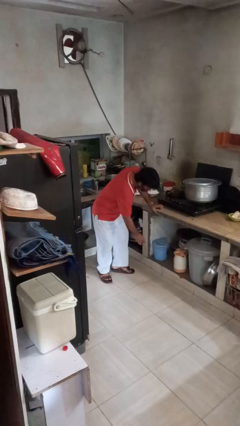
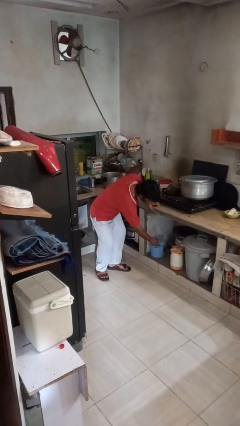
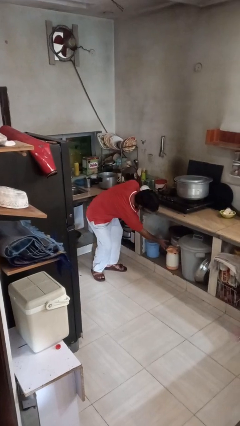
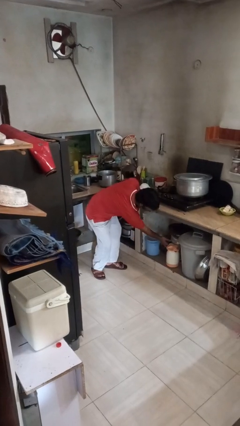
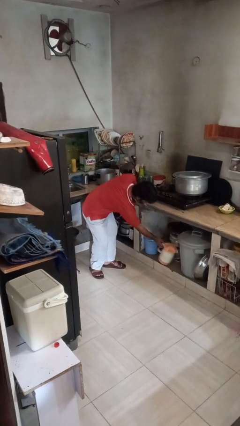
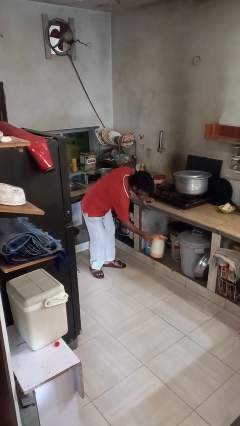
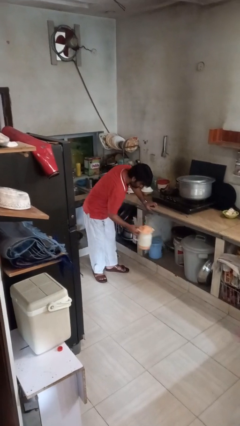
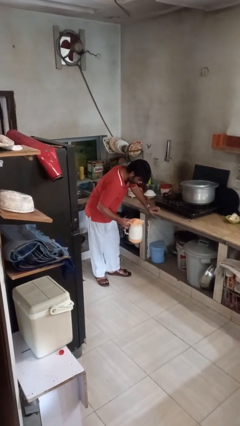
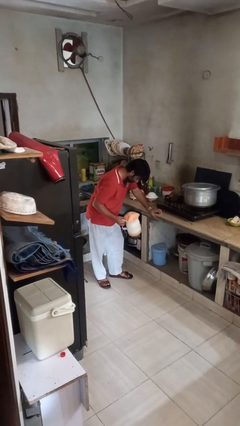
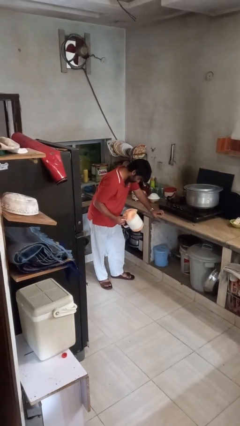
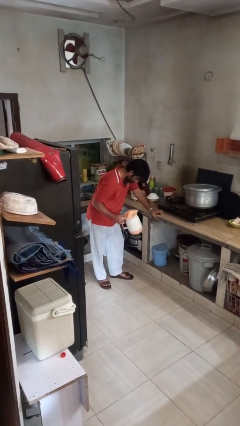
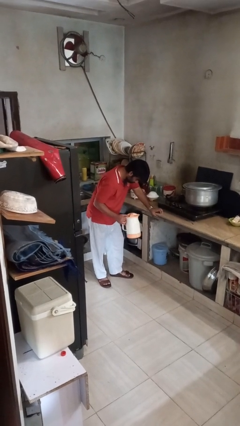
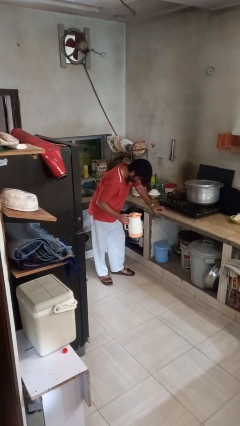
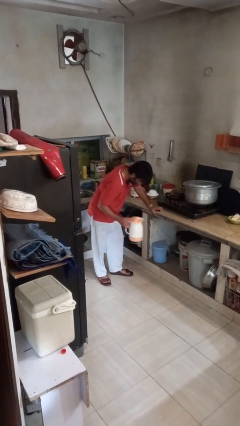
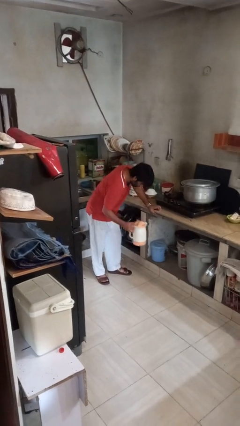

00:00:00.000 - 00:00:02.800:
person picks up object from cabinet

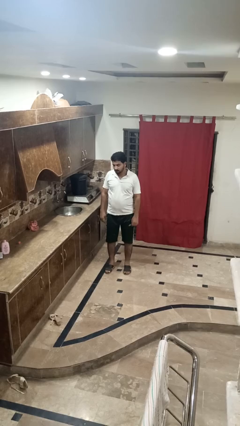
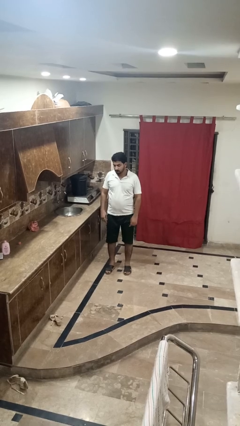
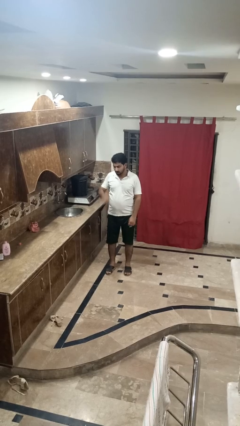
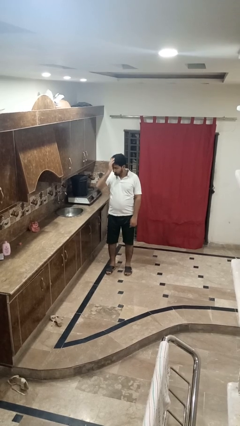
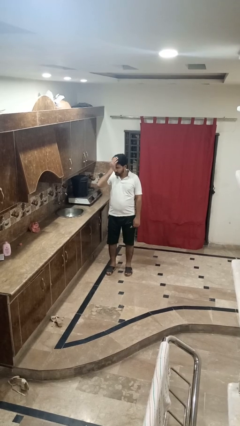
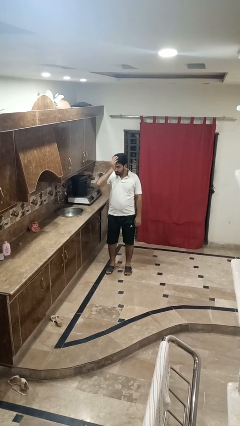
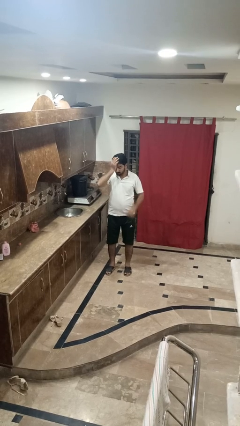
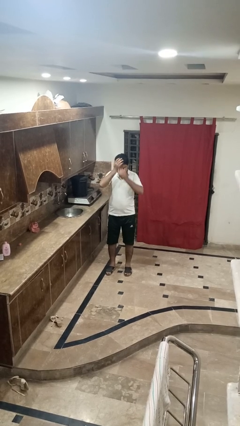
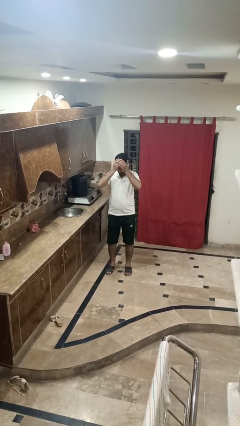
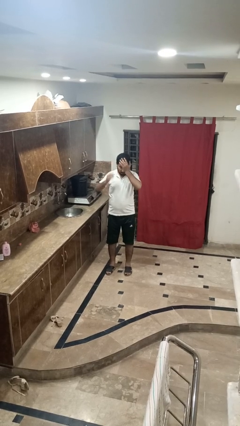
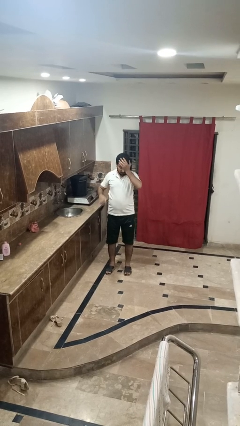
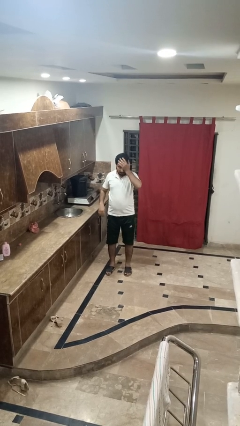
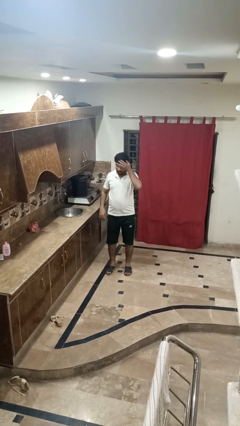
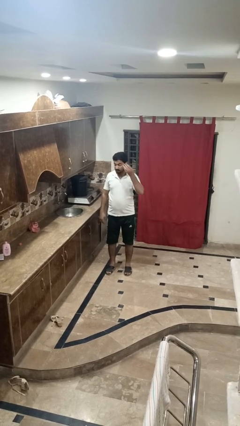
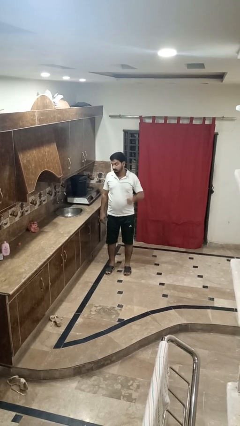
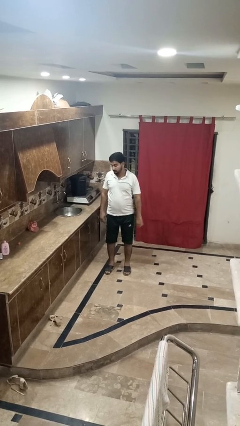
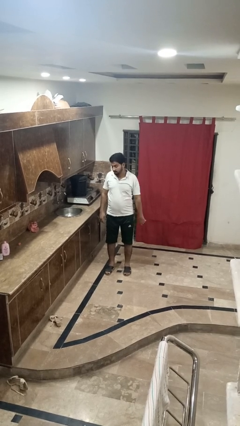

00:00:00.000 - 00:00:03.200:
person rubs eyes

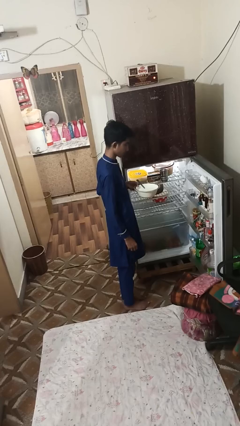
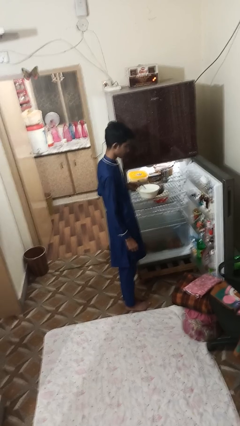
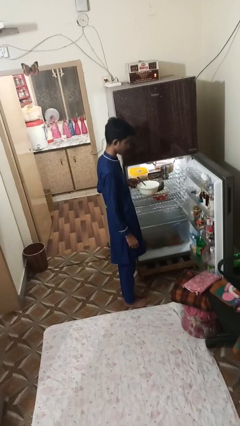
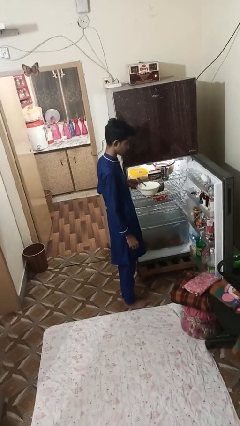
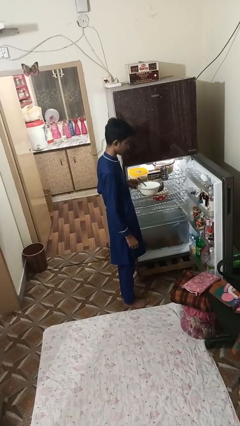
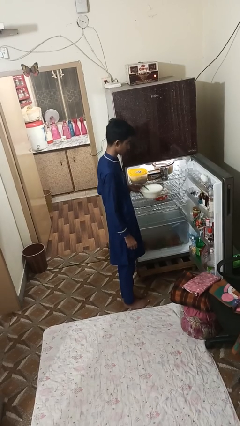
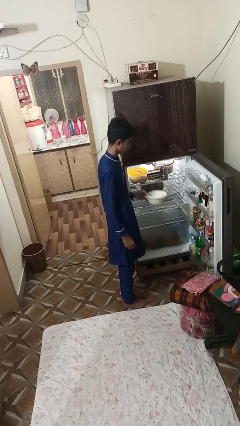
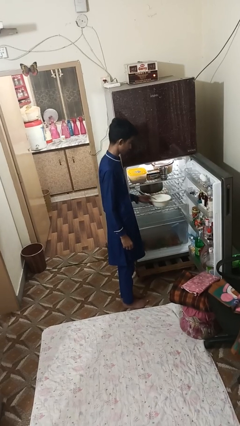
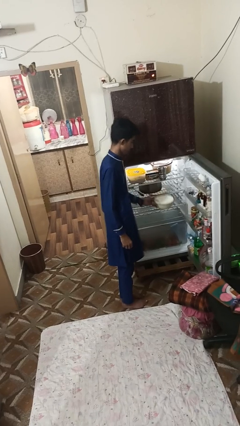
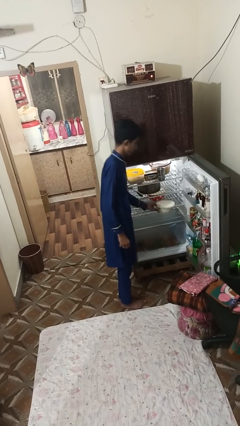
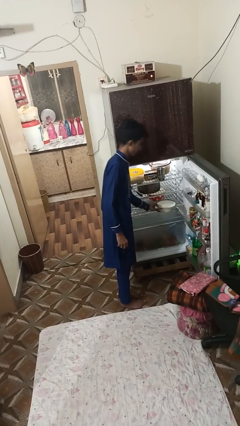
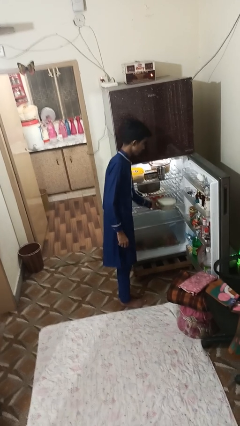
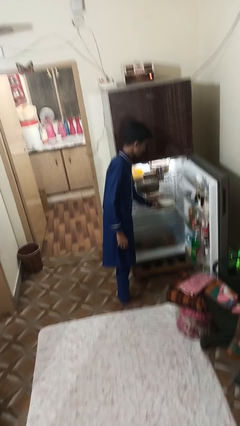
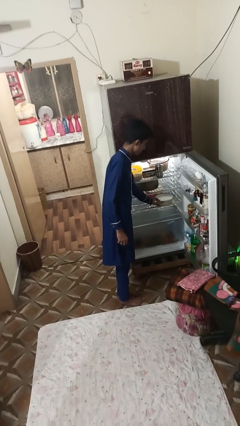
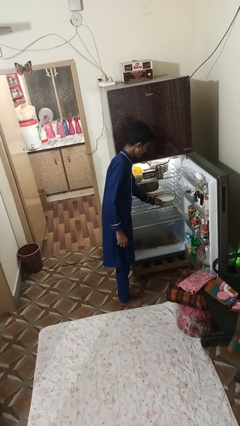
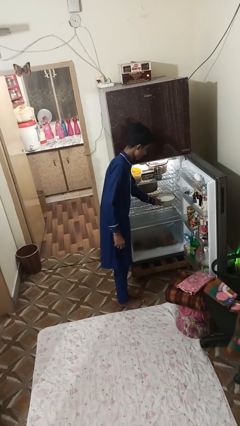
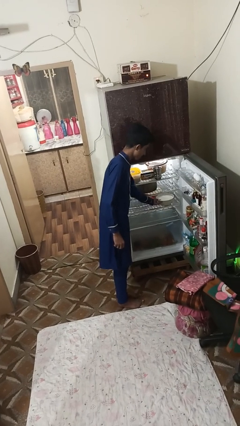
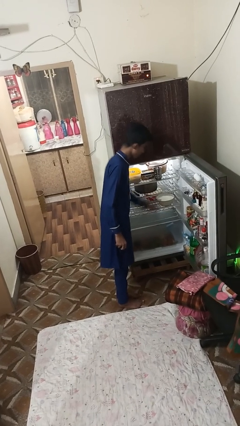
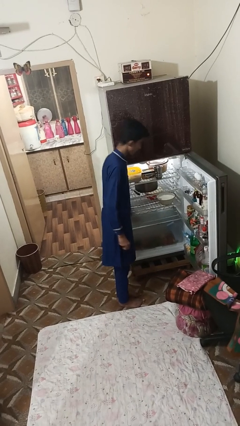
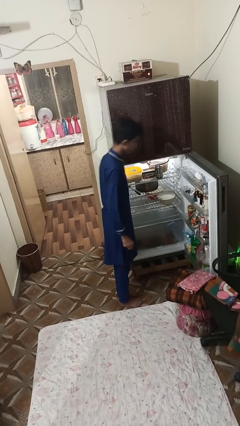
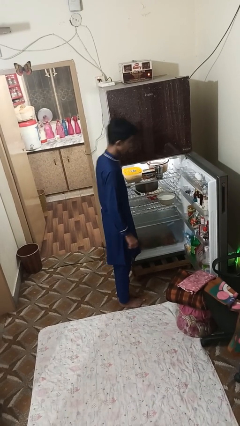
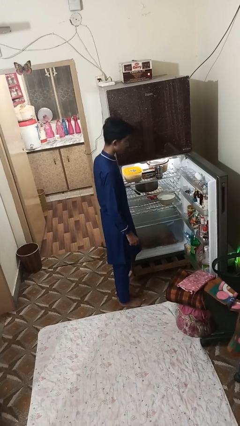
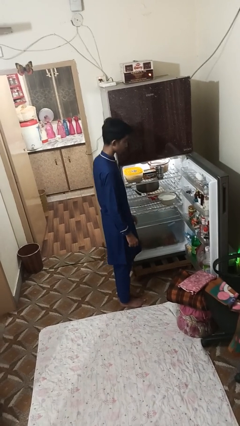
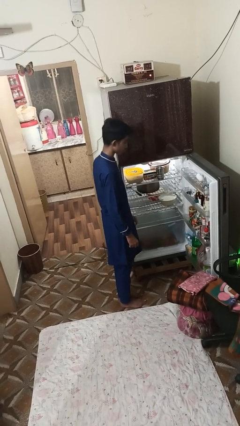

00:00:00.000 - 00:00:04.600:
person puts object into refrigerator

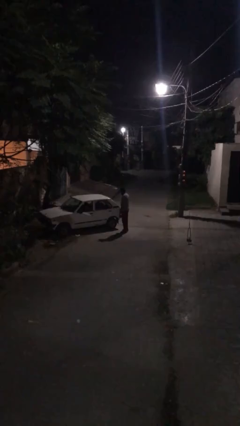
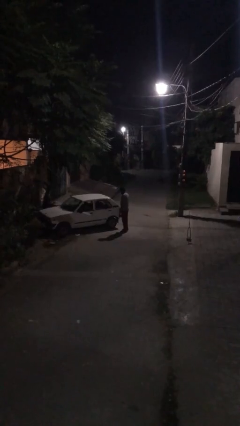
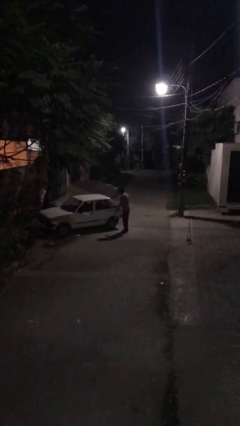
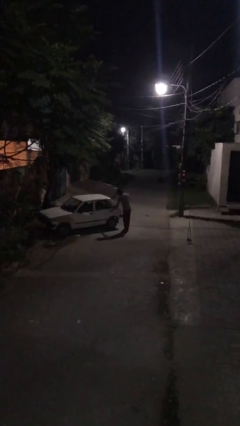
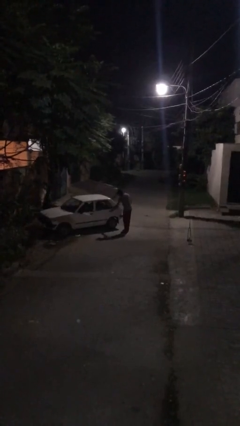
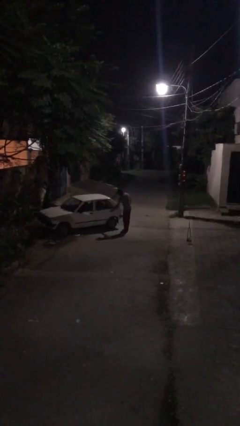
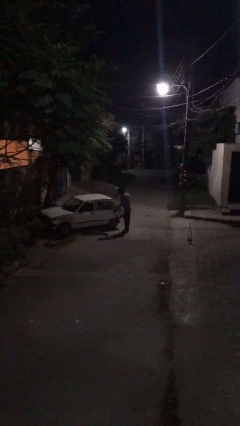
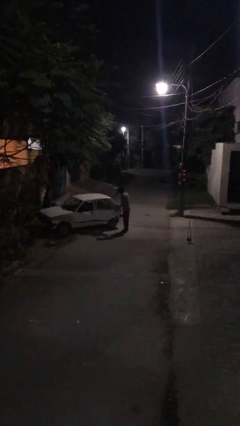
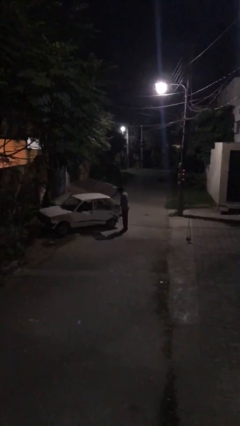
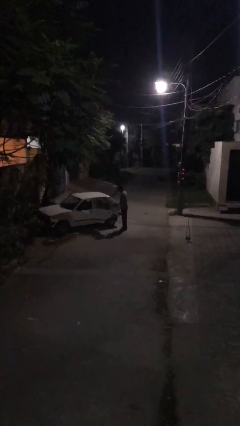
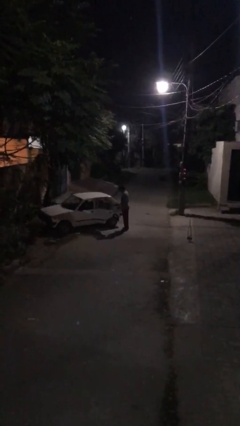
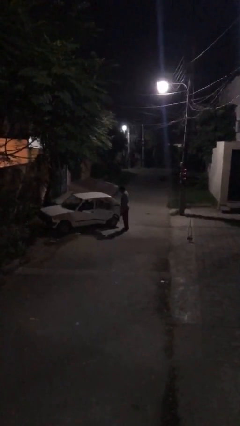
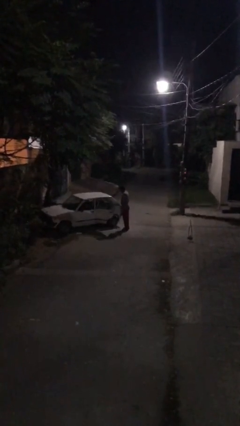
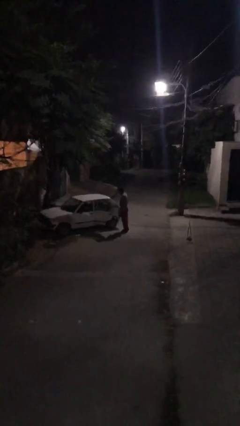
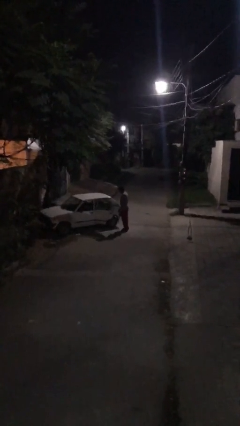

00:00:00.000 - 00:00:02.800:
person opens car door

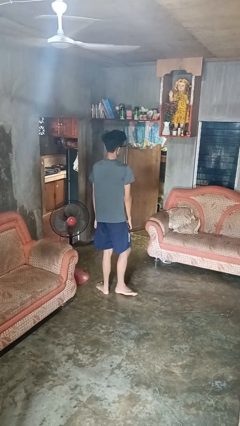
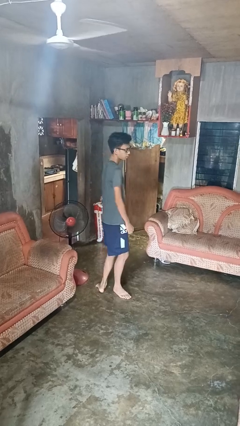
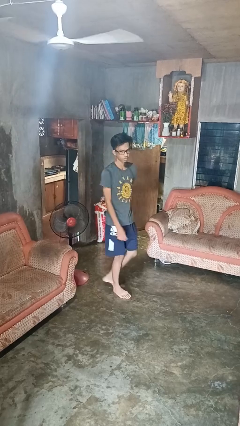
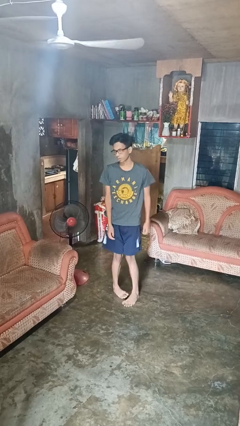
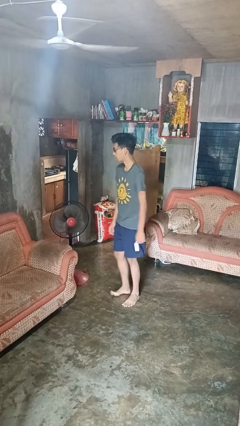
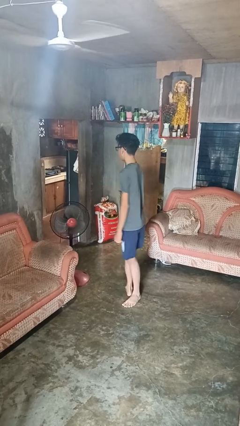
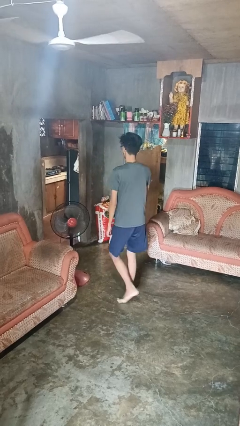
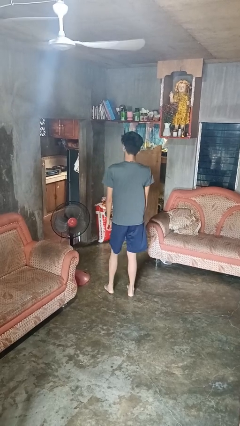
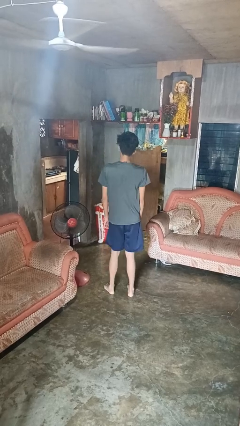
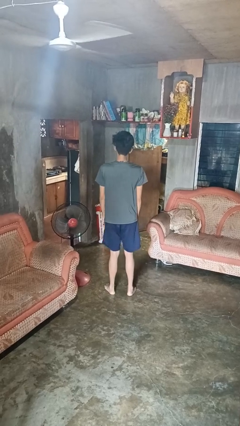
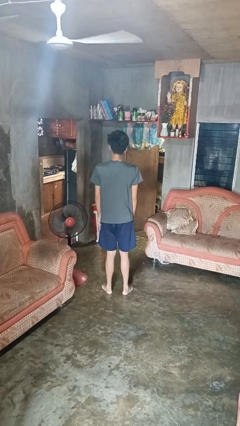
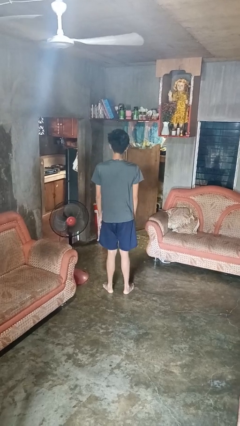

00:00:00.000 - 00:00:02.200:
person twirls

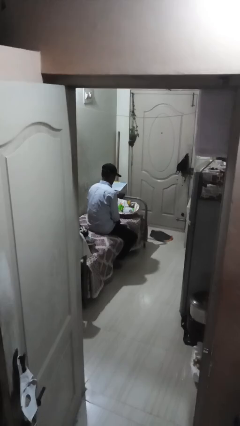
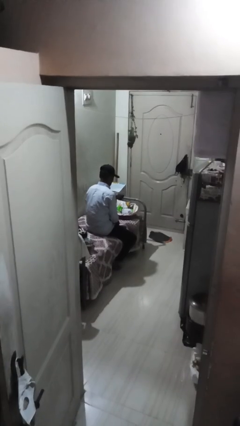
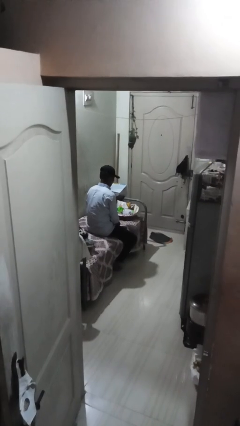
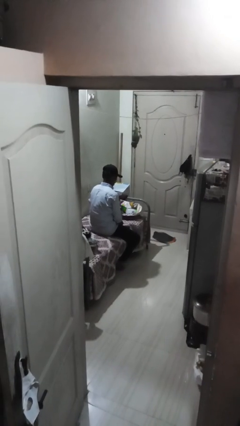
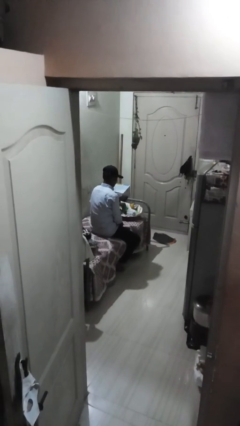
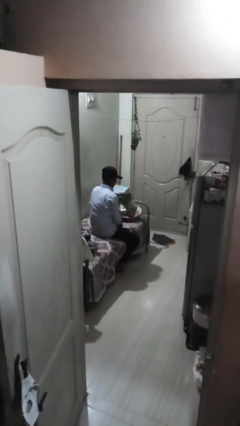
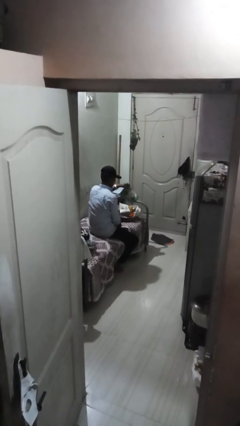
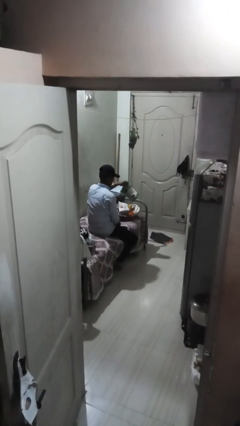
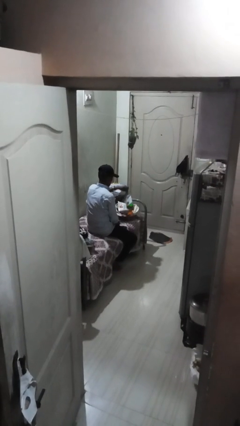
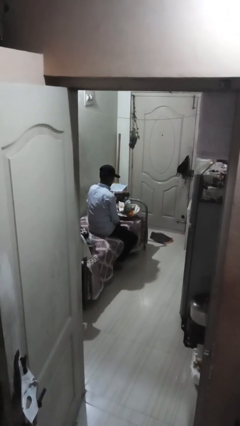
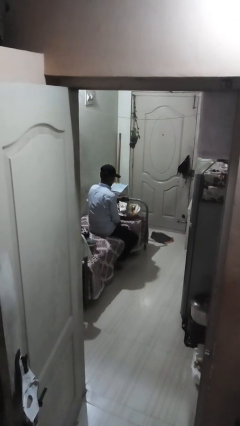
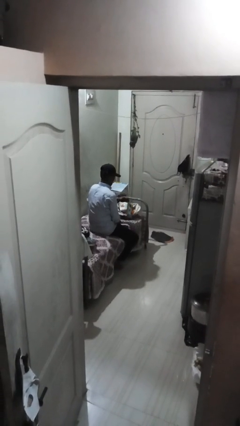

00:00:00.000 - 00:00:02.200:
person takes object from bag
